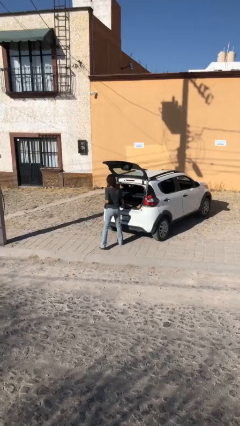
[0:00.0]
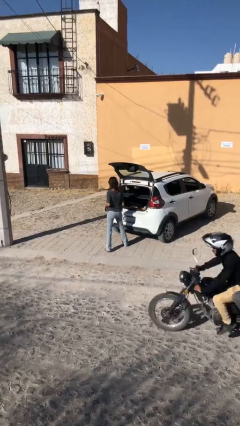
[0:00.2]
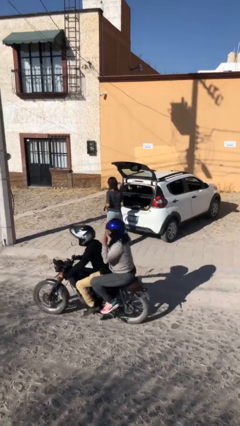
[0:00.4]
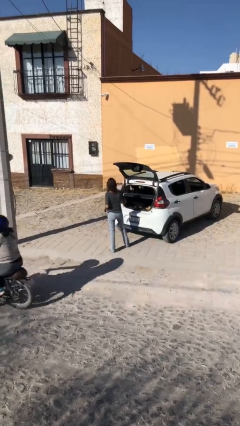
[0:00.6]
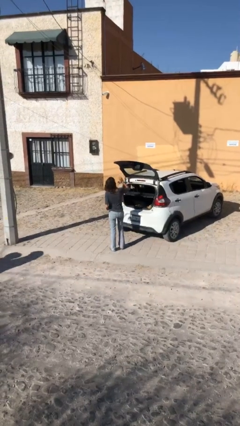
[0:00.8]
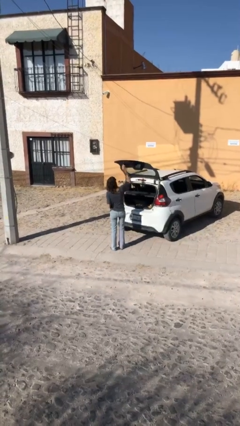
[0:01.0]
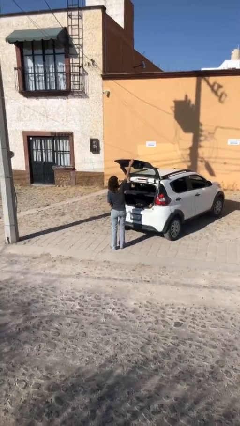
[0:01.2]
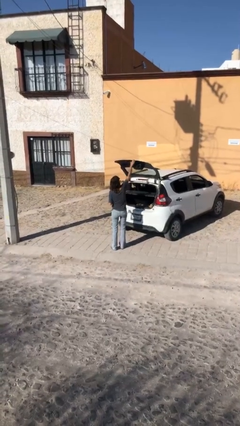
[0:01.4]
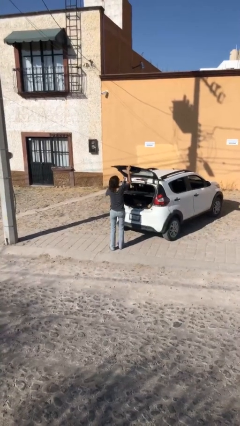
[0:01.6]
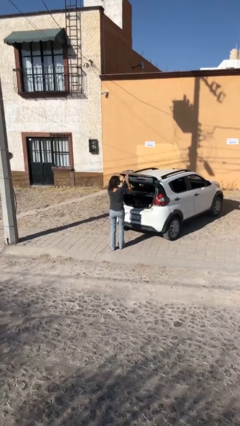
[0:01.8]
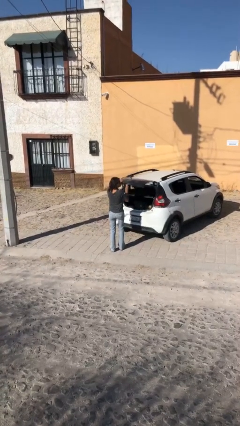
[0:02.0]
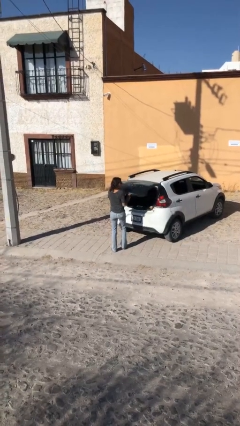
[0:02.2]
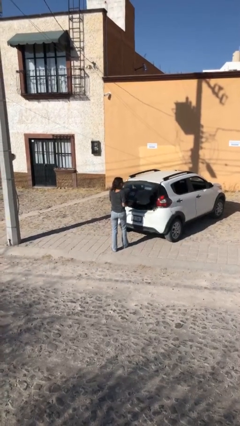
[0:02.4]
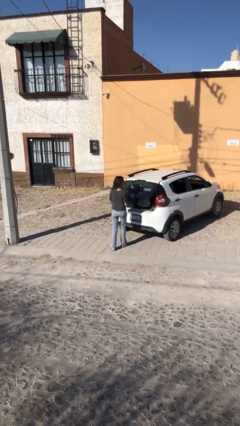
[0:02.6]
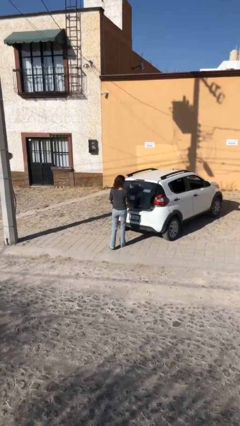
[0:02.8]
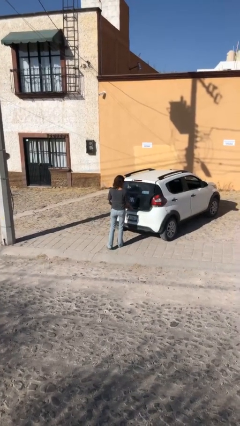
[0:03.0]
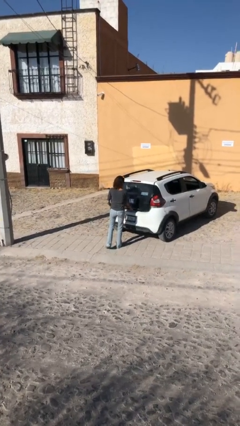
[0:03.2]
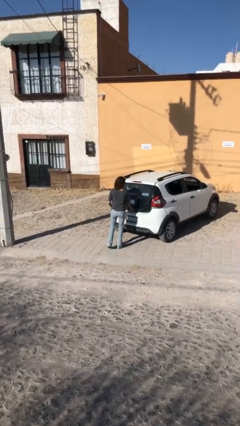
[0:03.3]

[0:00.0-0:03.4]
person closes car trunk

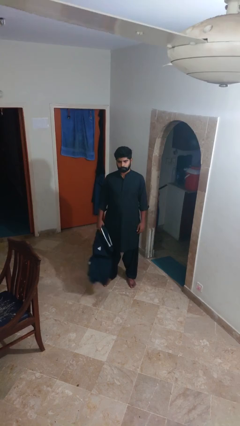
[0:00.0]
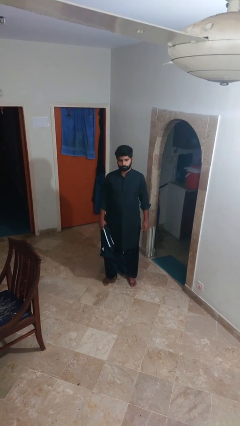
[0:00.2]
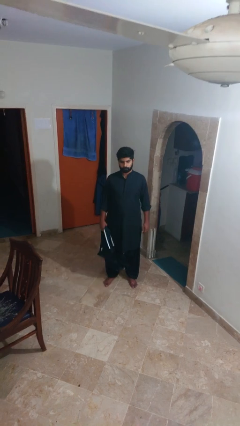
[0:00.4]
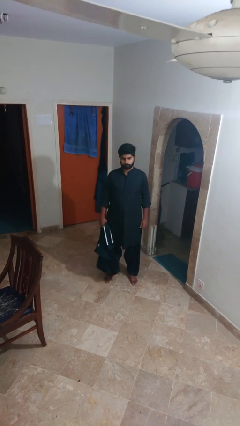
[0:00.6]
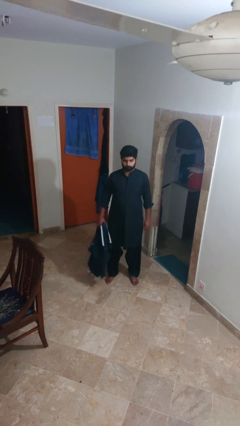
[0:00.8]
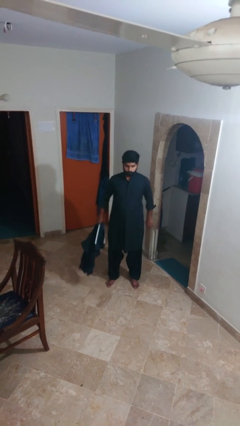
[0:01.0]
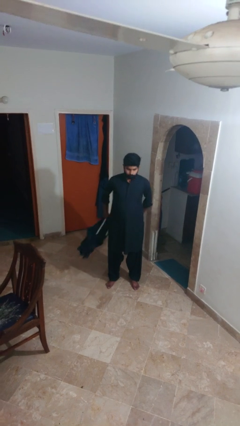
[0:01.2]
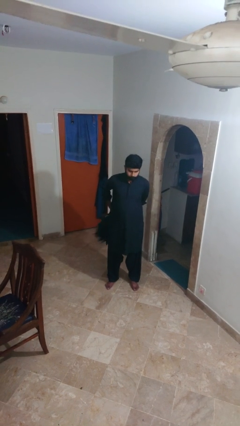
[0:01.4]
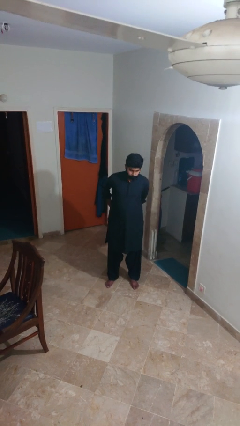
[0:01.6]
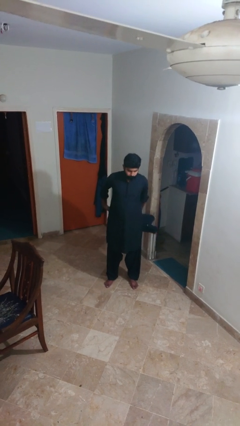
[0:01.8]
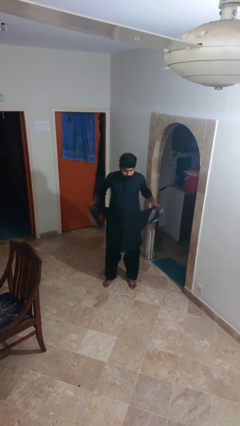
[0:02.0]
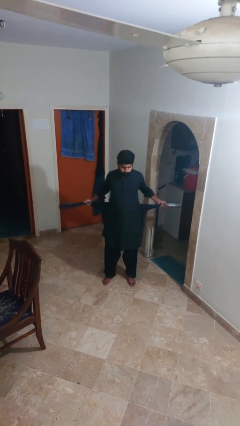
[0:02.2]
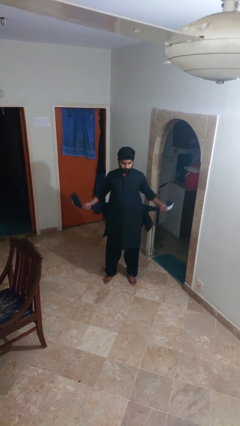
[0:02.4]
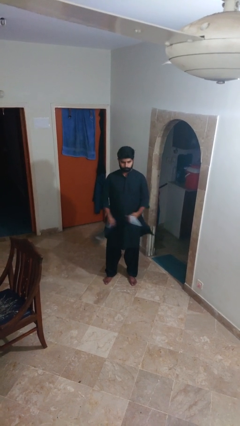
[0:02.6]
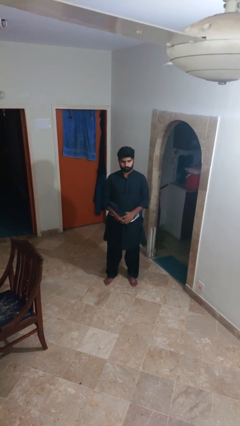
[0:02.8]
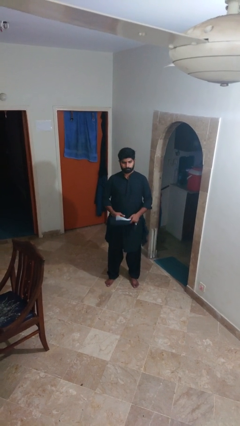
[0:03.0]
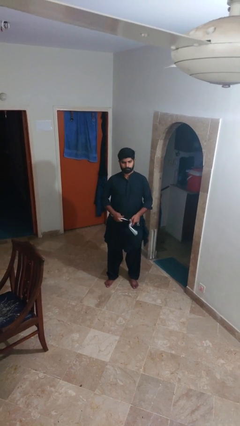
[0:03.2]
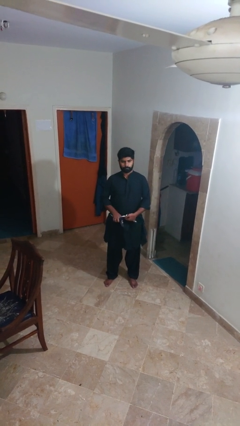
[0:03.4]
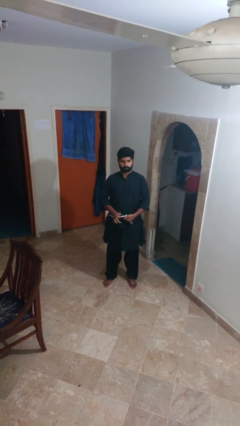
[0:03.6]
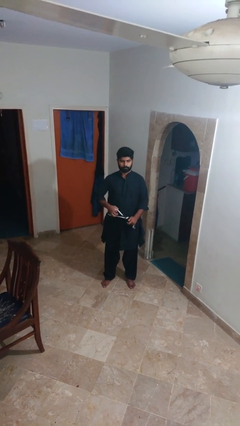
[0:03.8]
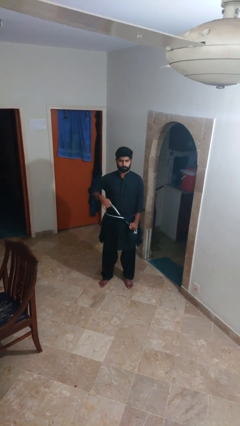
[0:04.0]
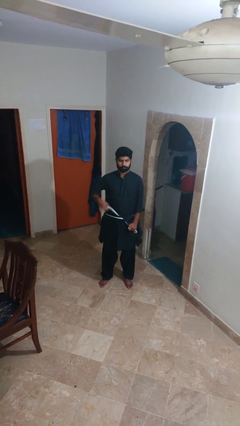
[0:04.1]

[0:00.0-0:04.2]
person ties jacket around waist

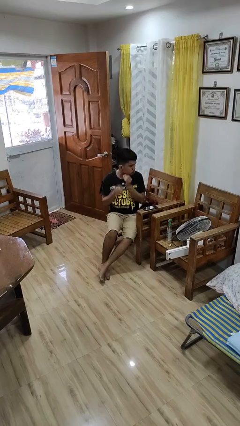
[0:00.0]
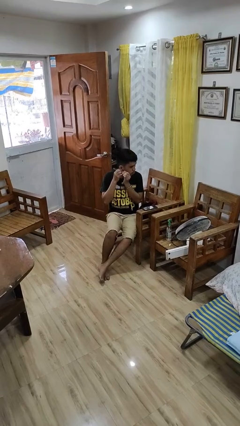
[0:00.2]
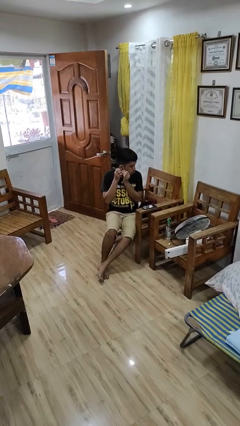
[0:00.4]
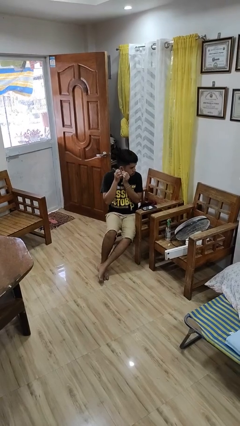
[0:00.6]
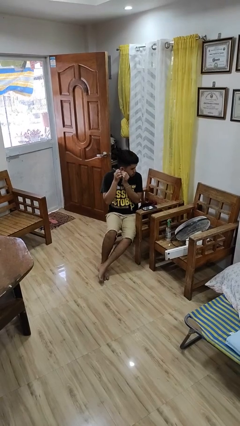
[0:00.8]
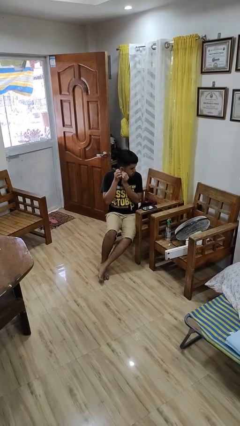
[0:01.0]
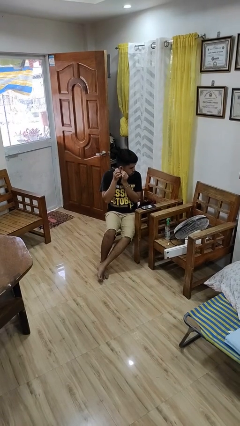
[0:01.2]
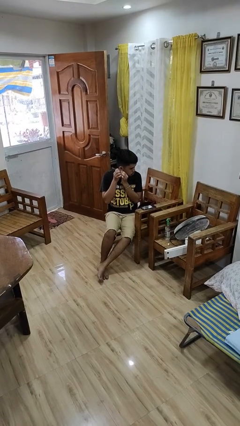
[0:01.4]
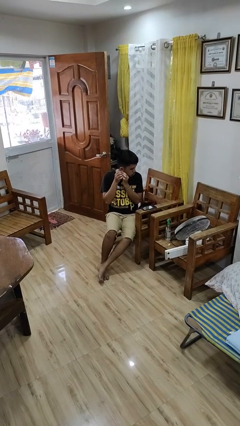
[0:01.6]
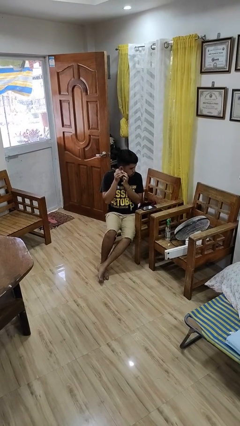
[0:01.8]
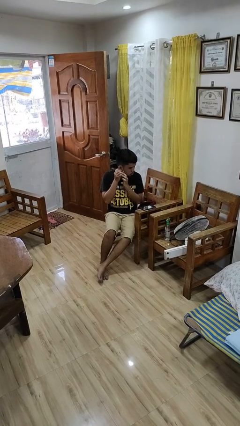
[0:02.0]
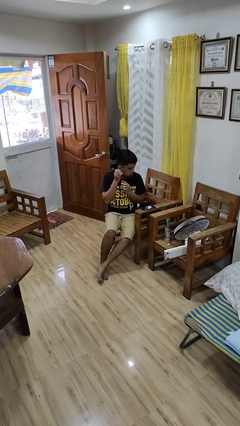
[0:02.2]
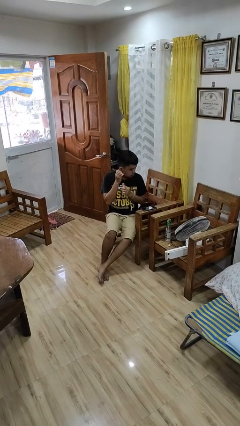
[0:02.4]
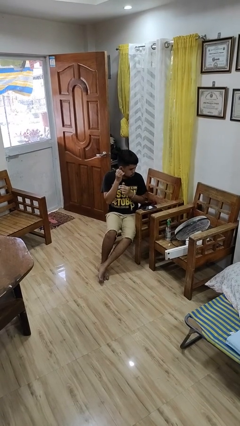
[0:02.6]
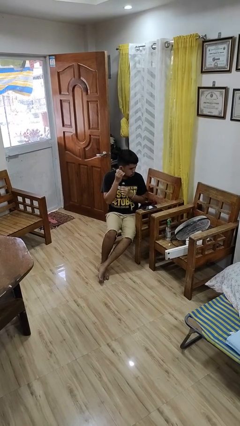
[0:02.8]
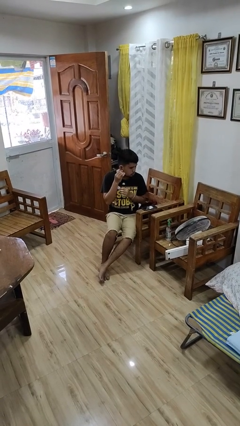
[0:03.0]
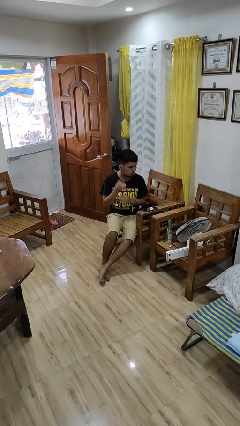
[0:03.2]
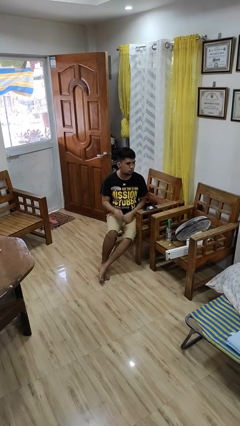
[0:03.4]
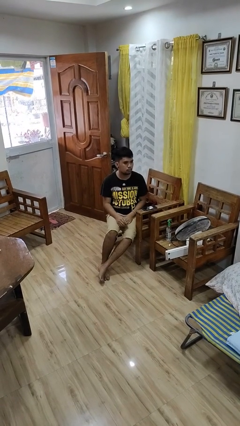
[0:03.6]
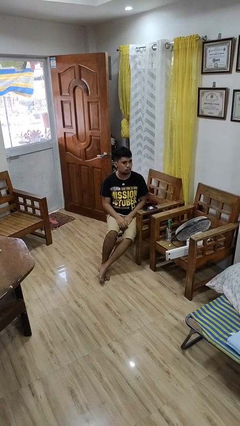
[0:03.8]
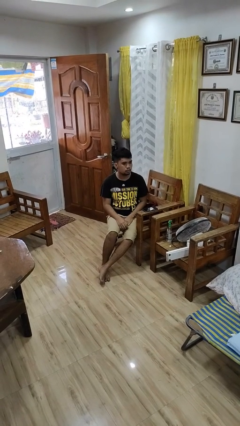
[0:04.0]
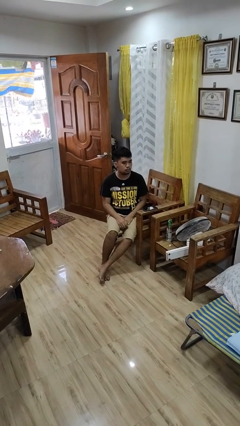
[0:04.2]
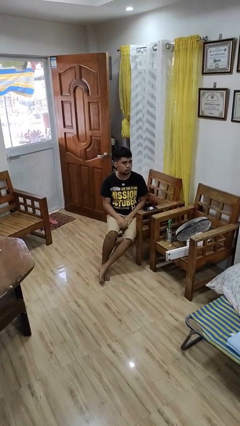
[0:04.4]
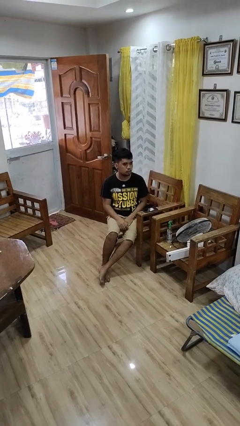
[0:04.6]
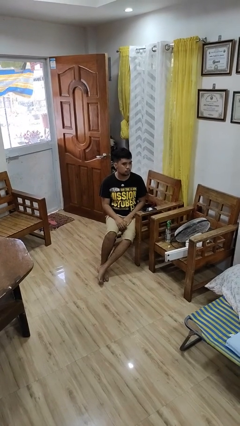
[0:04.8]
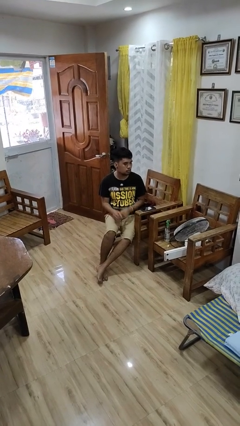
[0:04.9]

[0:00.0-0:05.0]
person puts on earrings

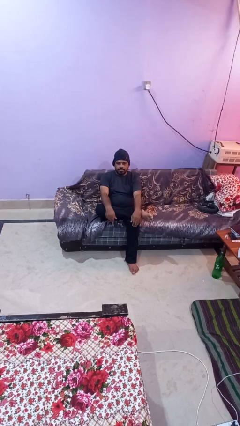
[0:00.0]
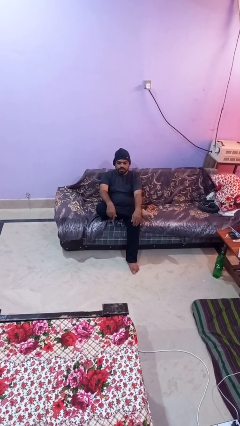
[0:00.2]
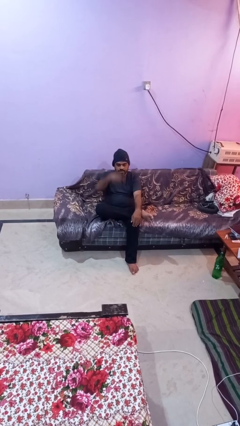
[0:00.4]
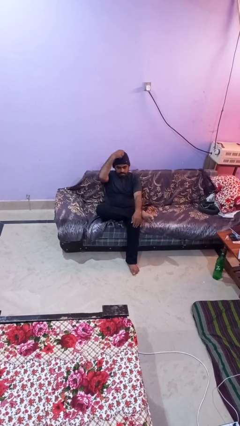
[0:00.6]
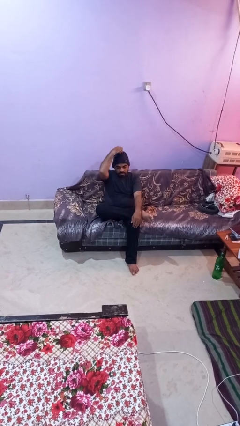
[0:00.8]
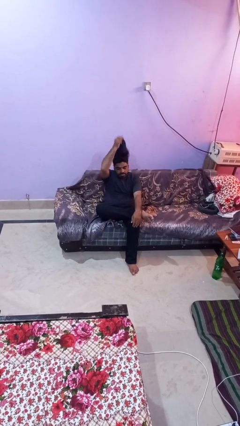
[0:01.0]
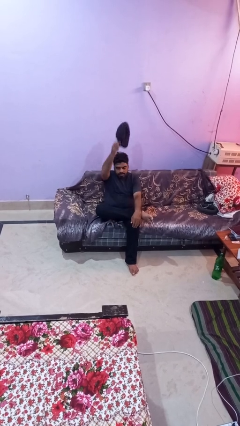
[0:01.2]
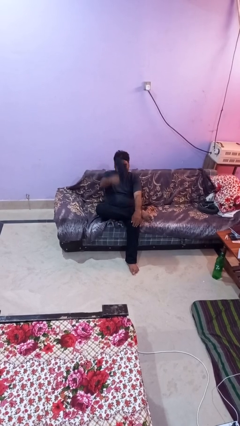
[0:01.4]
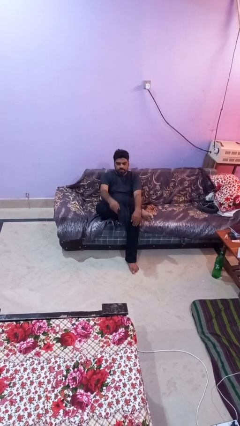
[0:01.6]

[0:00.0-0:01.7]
person takes off hat

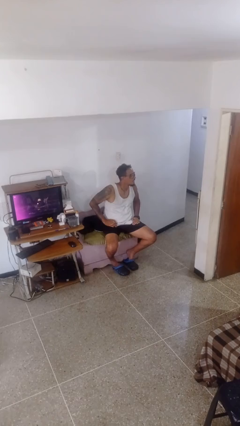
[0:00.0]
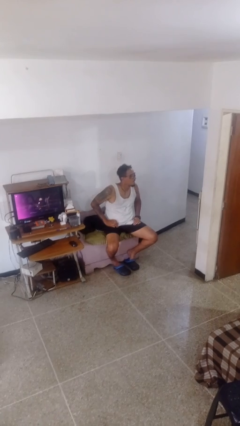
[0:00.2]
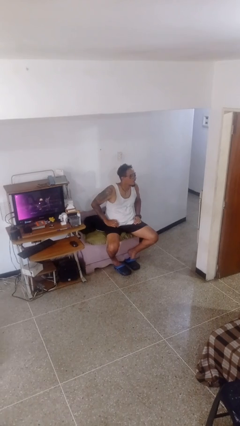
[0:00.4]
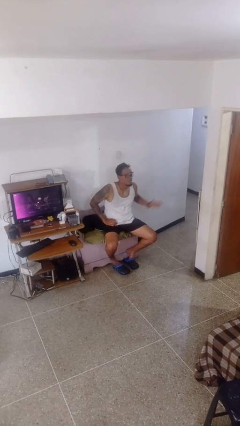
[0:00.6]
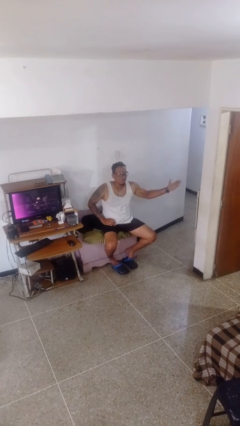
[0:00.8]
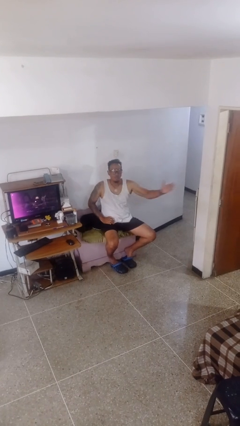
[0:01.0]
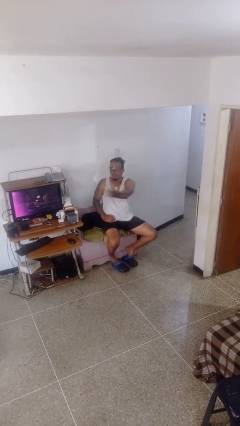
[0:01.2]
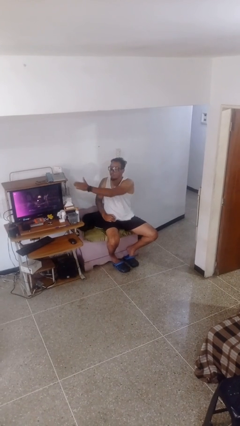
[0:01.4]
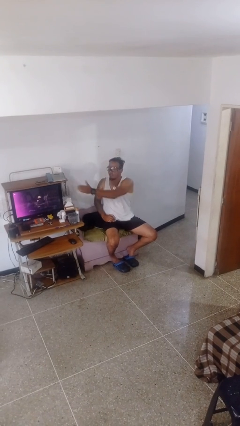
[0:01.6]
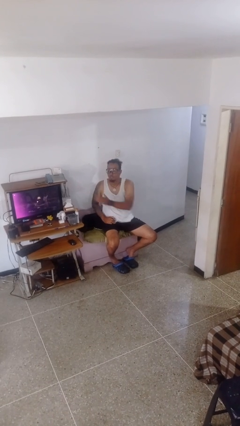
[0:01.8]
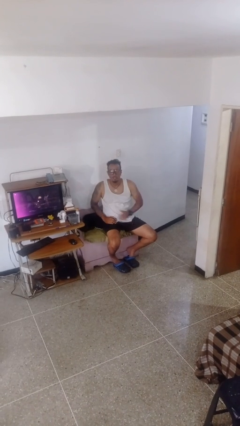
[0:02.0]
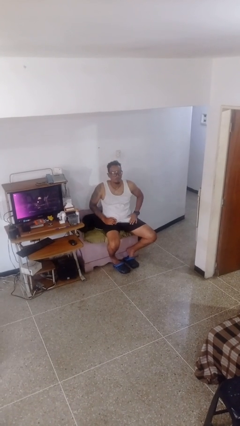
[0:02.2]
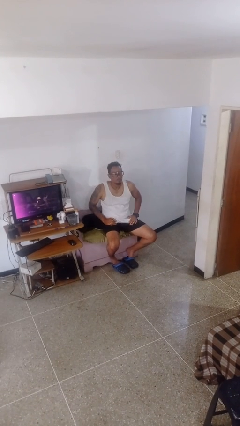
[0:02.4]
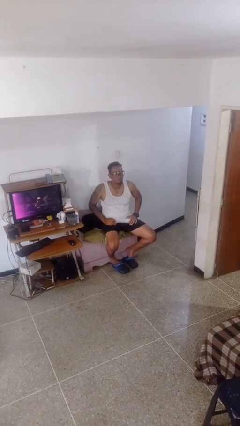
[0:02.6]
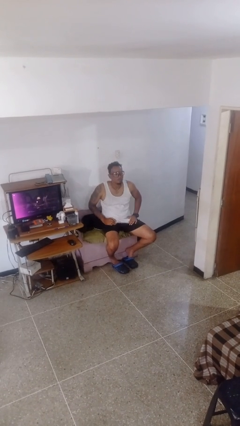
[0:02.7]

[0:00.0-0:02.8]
person gestures swipe right

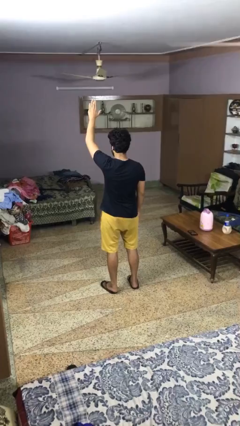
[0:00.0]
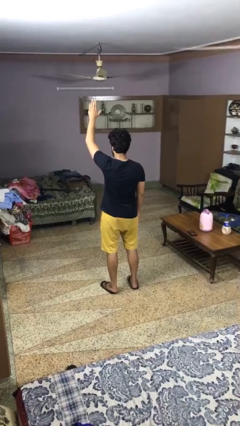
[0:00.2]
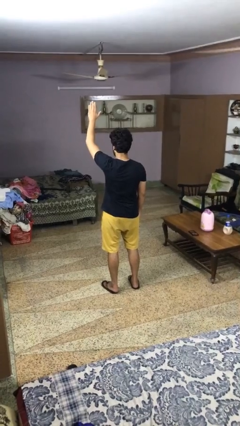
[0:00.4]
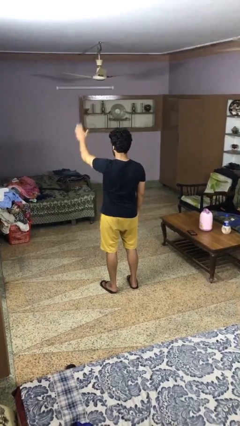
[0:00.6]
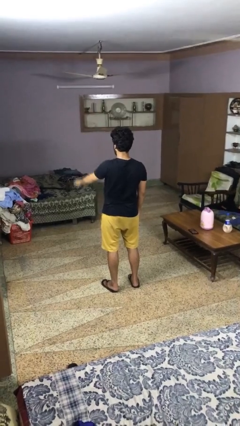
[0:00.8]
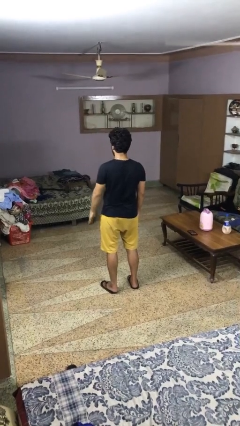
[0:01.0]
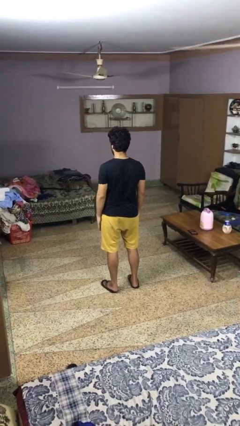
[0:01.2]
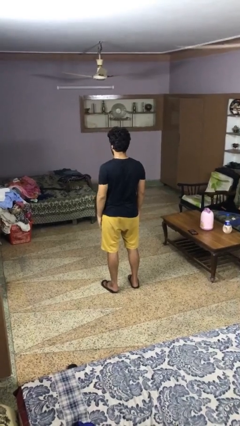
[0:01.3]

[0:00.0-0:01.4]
person gestures lower hand
